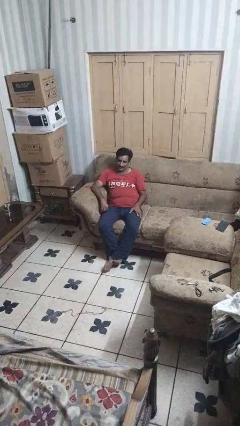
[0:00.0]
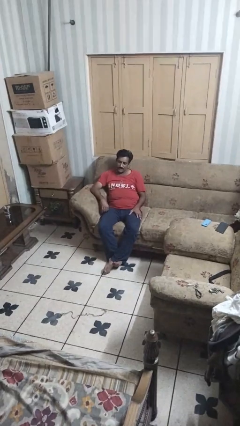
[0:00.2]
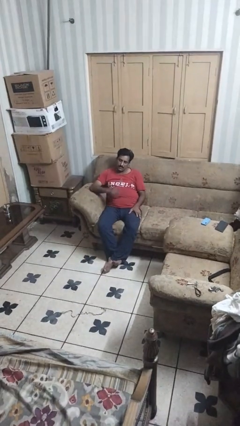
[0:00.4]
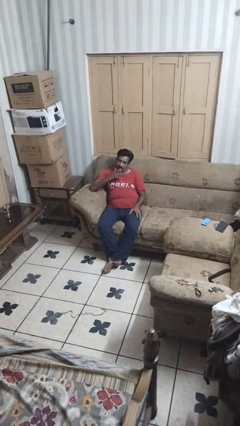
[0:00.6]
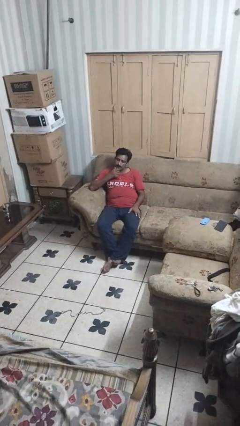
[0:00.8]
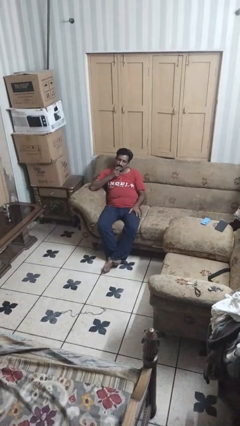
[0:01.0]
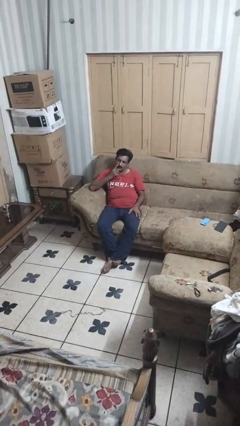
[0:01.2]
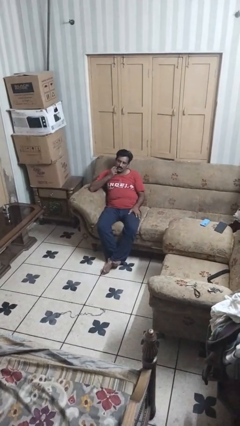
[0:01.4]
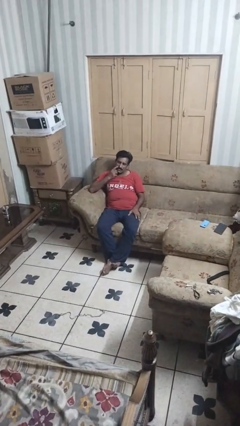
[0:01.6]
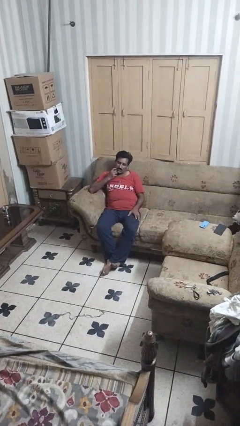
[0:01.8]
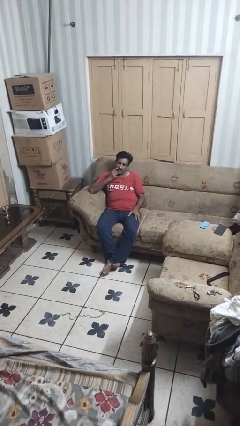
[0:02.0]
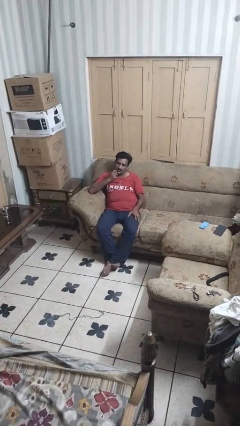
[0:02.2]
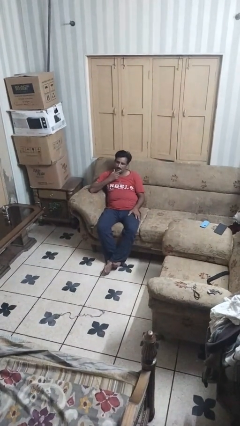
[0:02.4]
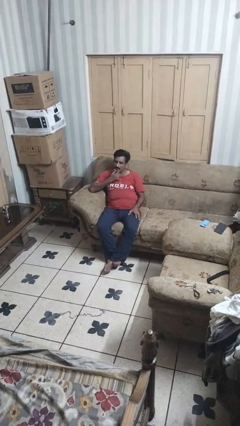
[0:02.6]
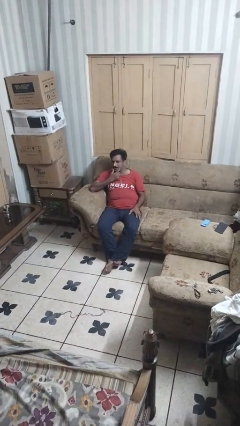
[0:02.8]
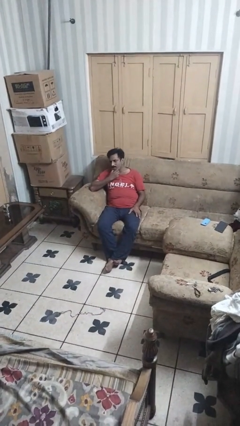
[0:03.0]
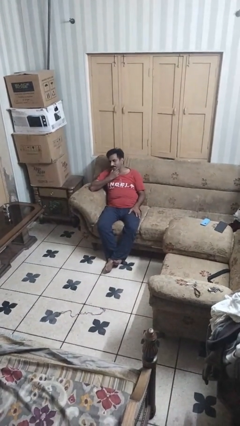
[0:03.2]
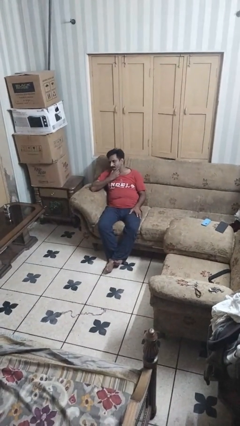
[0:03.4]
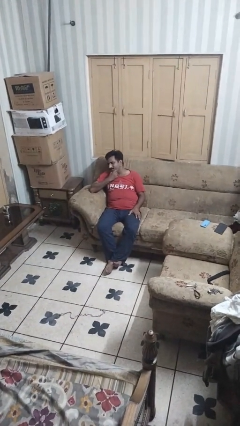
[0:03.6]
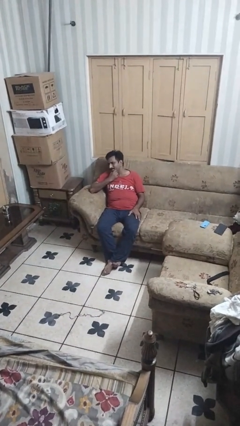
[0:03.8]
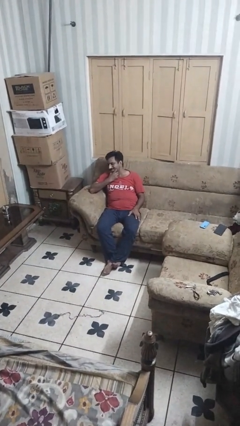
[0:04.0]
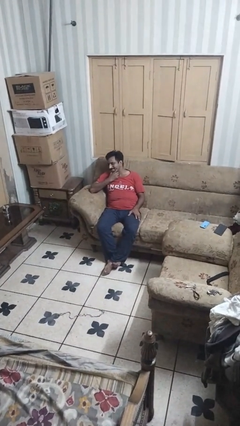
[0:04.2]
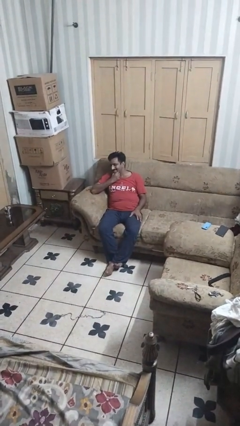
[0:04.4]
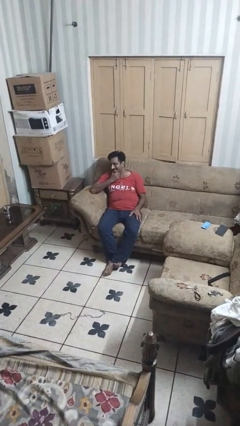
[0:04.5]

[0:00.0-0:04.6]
person strokes chin

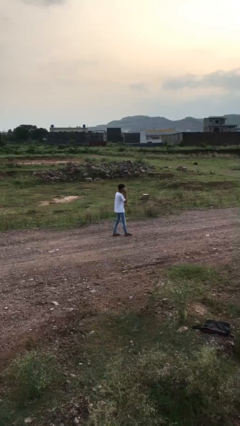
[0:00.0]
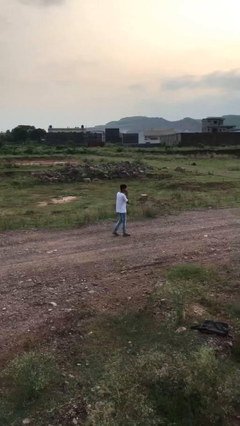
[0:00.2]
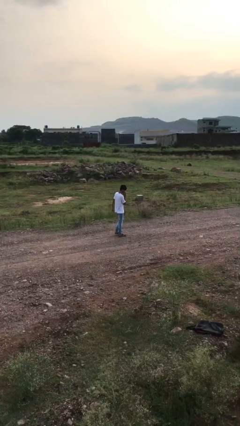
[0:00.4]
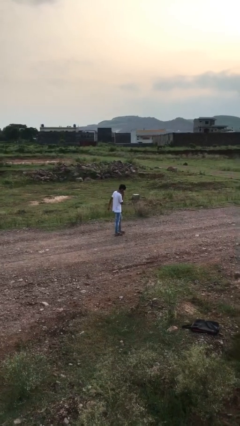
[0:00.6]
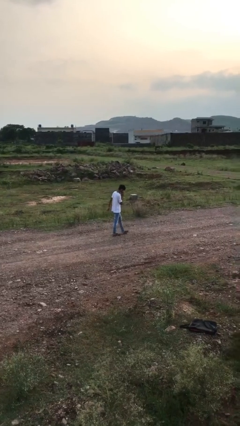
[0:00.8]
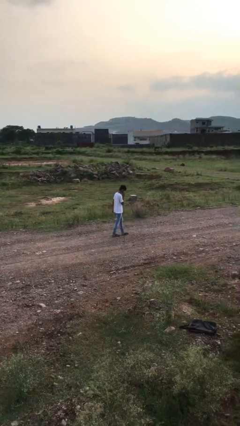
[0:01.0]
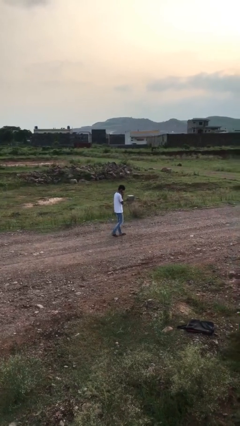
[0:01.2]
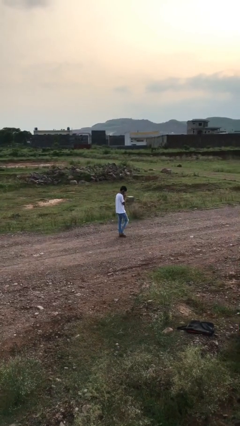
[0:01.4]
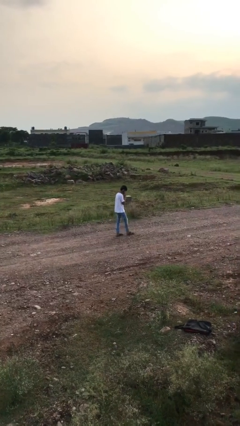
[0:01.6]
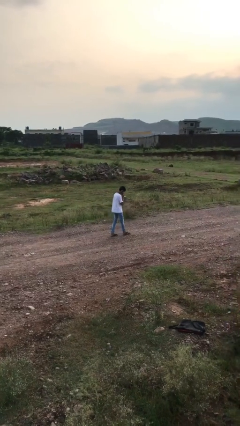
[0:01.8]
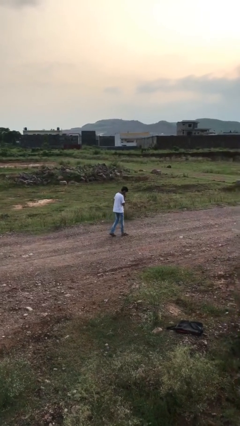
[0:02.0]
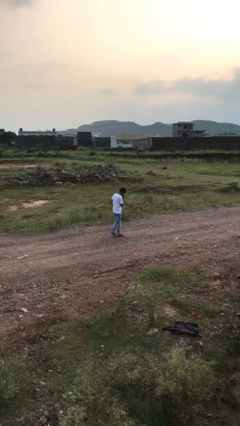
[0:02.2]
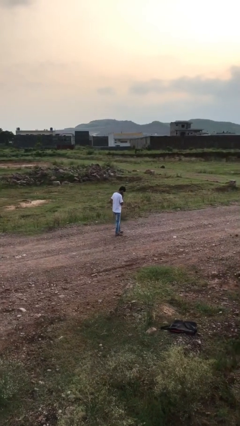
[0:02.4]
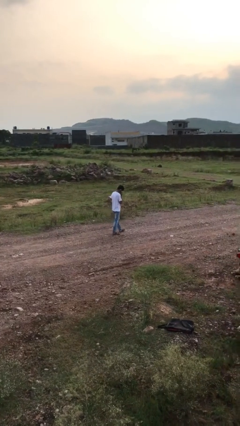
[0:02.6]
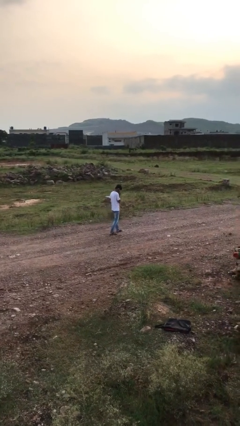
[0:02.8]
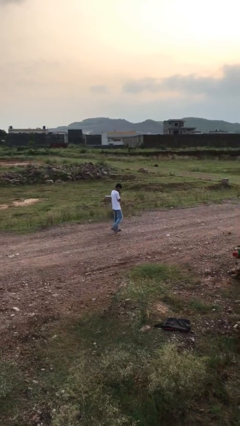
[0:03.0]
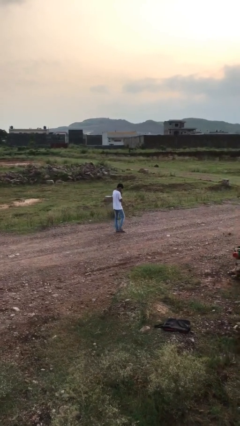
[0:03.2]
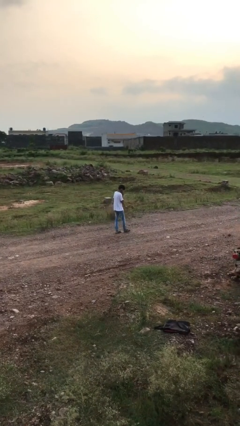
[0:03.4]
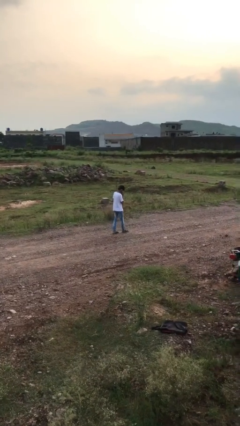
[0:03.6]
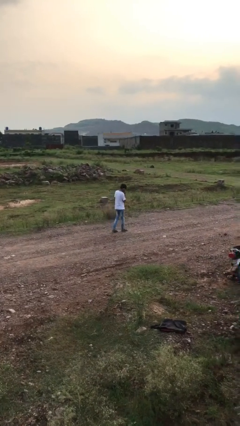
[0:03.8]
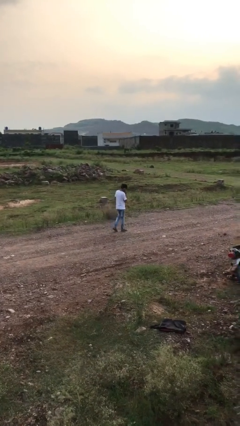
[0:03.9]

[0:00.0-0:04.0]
person talks on phone

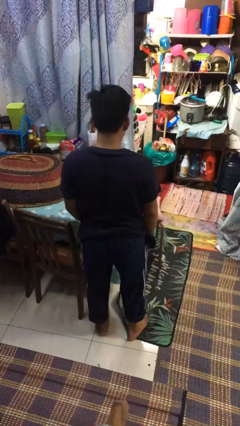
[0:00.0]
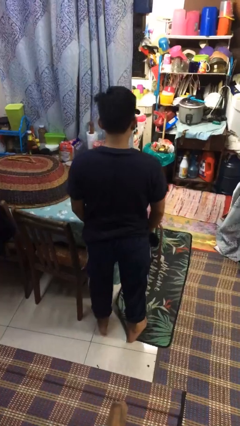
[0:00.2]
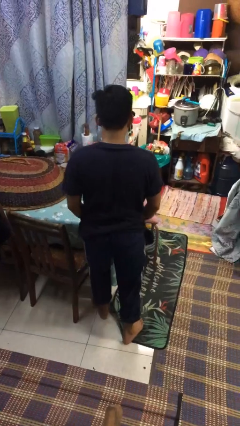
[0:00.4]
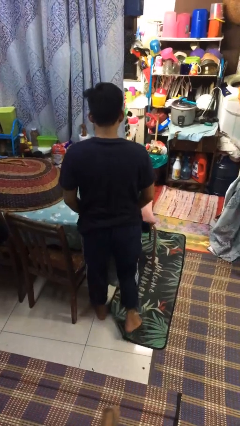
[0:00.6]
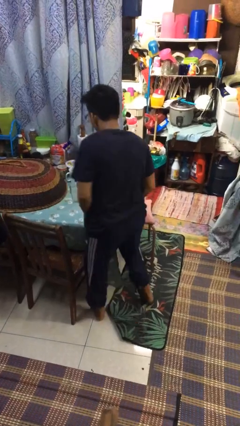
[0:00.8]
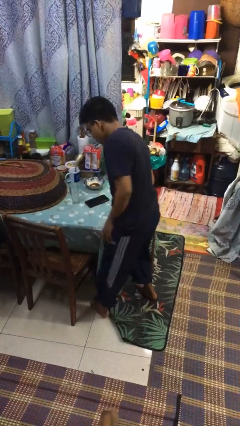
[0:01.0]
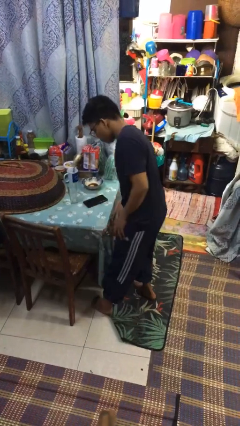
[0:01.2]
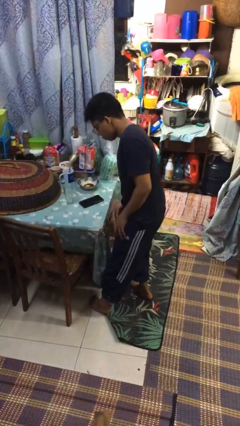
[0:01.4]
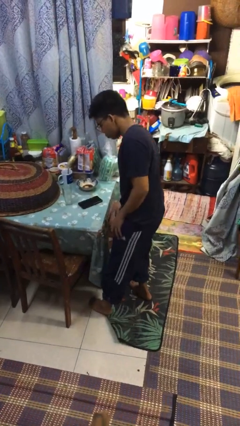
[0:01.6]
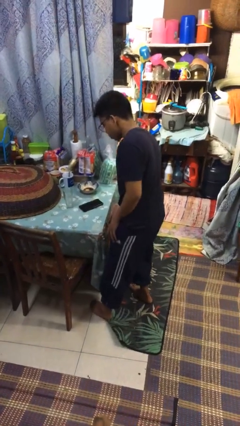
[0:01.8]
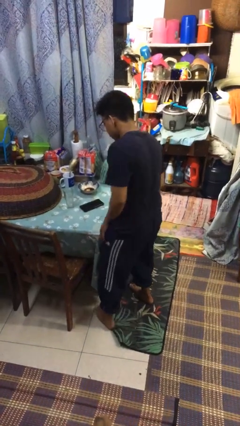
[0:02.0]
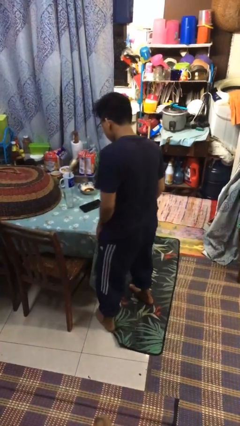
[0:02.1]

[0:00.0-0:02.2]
person bumps into table

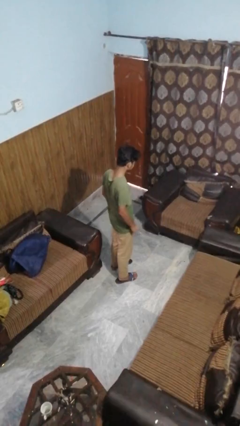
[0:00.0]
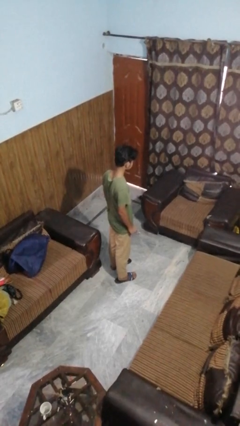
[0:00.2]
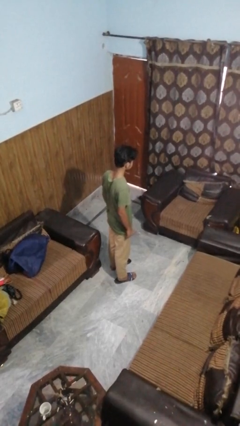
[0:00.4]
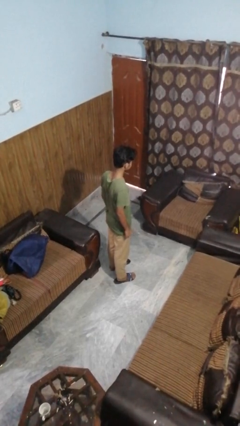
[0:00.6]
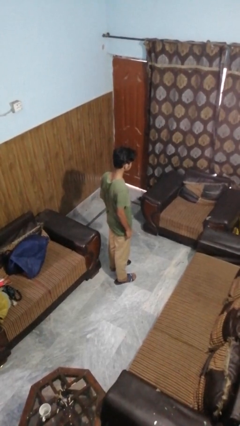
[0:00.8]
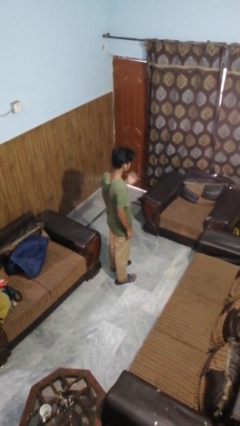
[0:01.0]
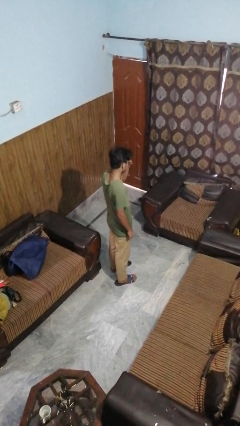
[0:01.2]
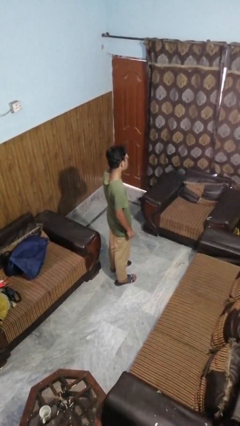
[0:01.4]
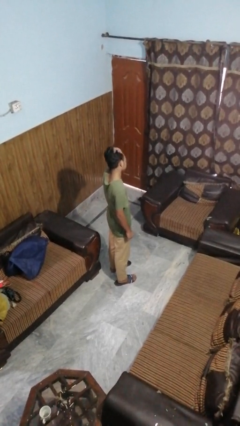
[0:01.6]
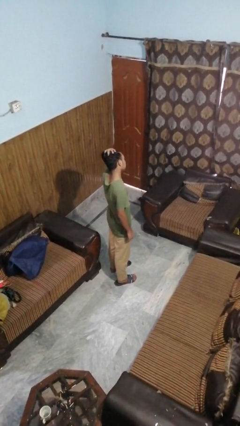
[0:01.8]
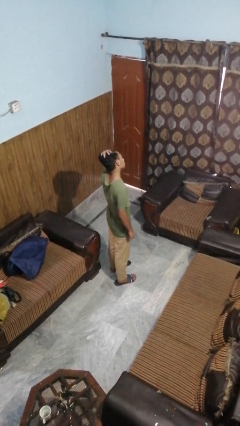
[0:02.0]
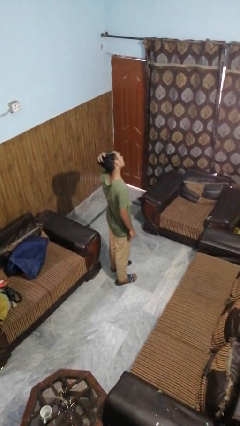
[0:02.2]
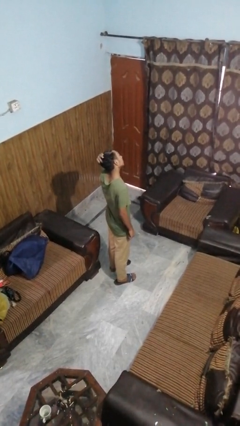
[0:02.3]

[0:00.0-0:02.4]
person strokes hair

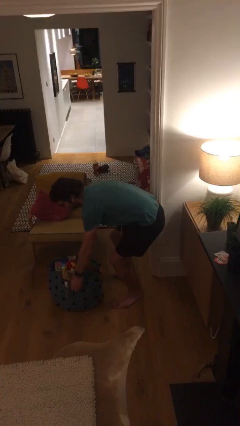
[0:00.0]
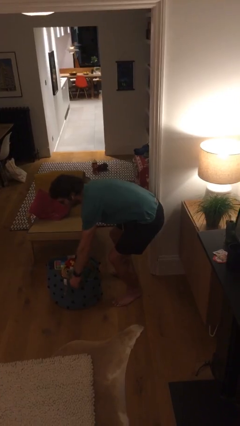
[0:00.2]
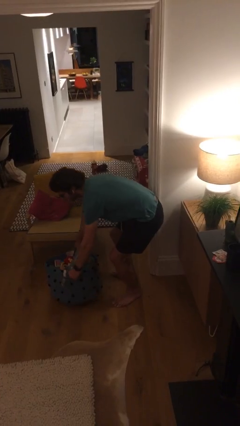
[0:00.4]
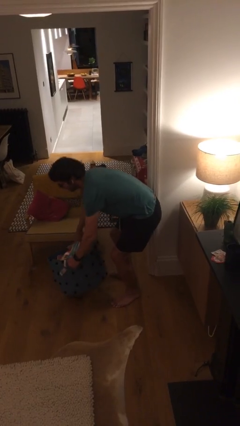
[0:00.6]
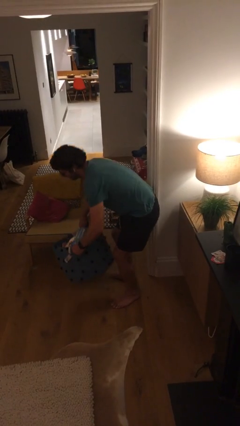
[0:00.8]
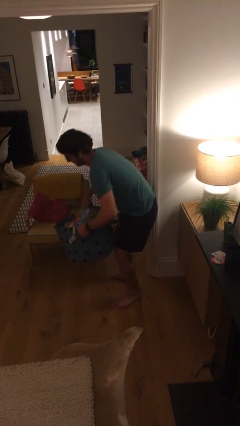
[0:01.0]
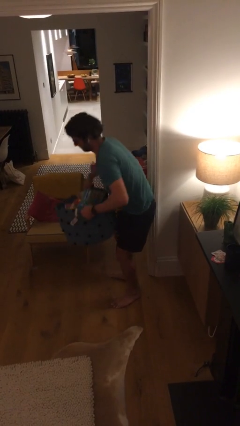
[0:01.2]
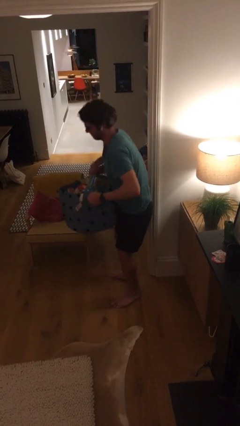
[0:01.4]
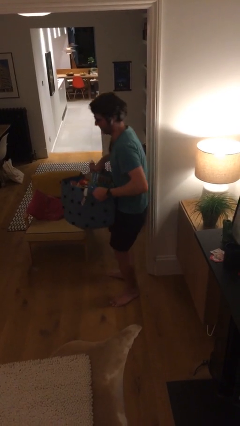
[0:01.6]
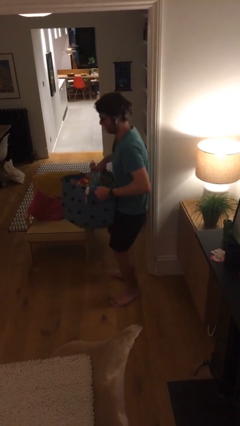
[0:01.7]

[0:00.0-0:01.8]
person picks up object from floor

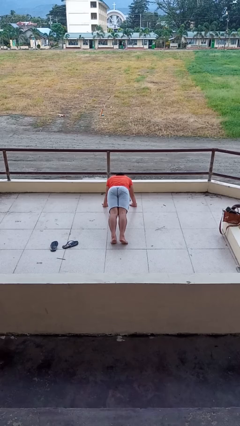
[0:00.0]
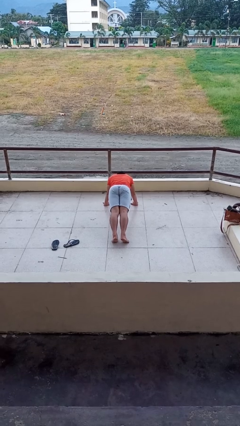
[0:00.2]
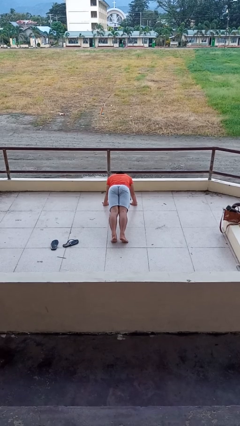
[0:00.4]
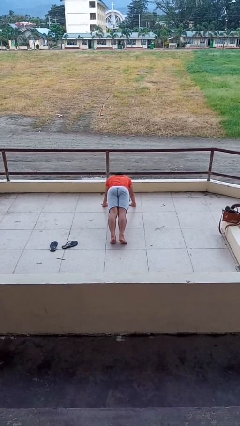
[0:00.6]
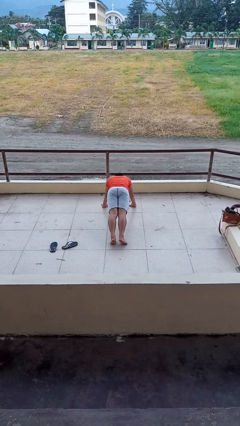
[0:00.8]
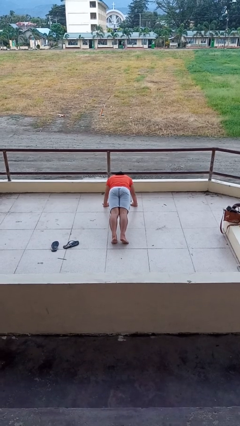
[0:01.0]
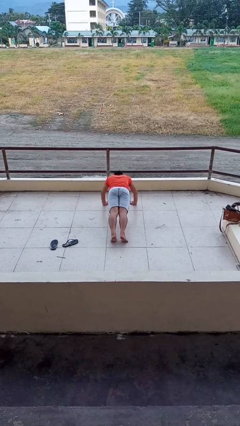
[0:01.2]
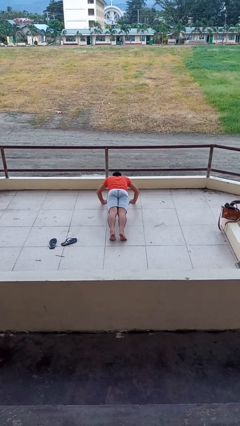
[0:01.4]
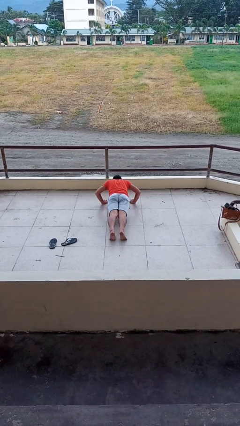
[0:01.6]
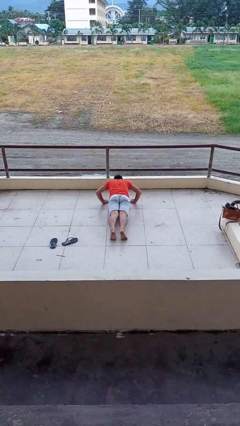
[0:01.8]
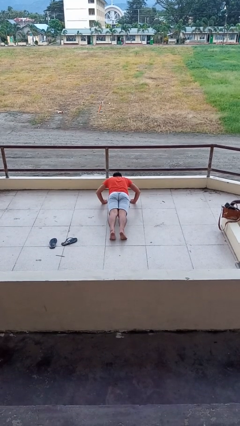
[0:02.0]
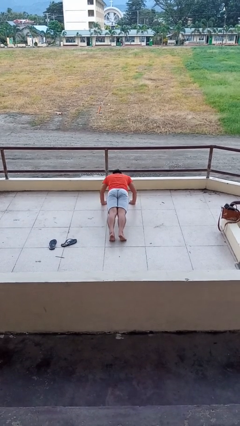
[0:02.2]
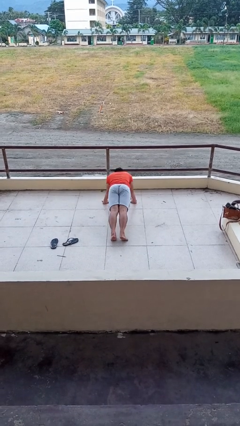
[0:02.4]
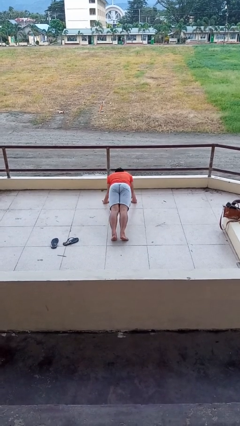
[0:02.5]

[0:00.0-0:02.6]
person exercises with pushup
